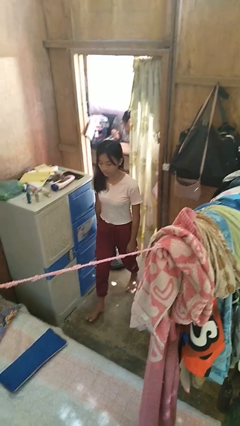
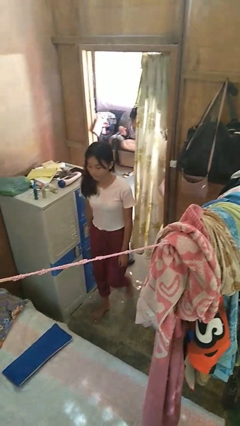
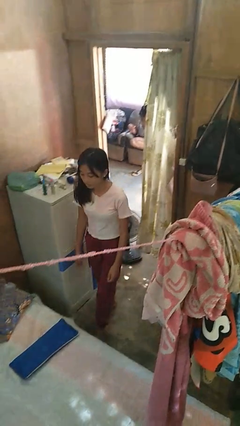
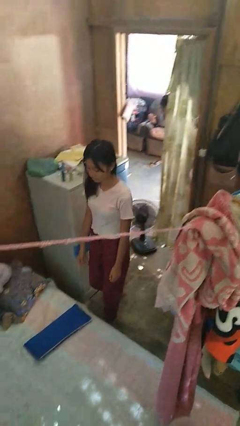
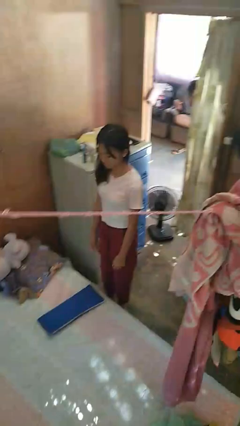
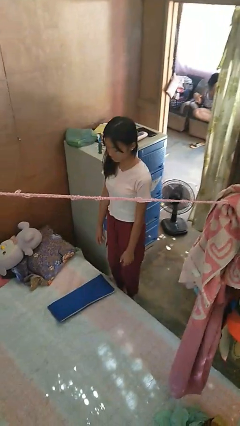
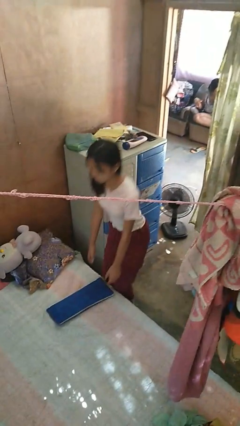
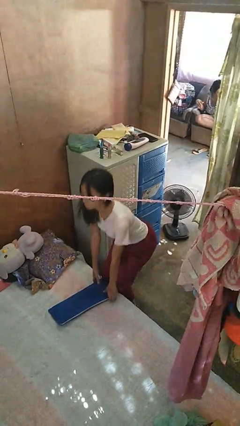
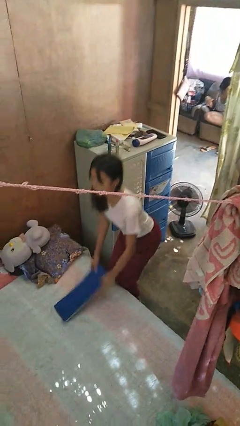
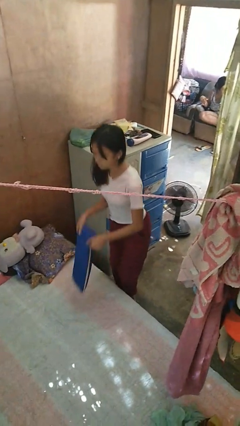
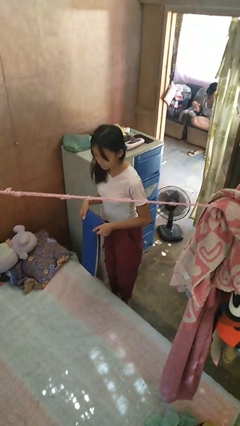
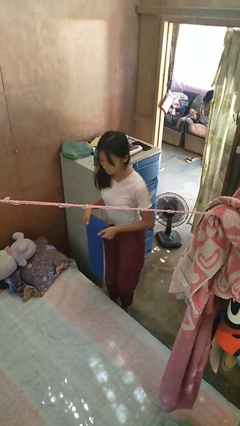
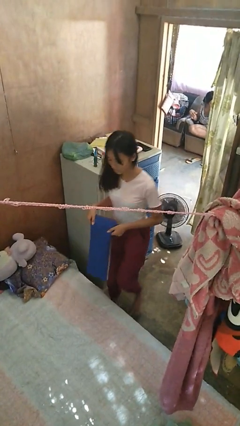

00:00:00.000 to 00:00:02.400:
person picks up object from bed

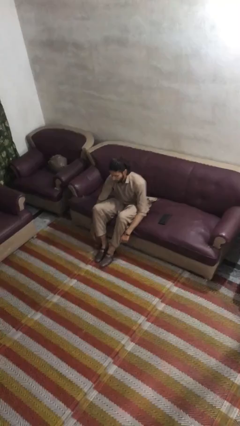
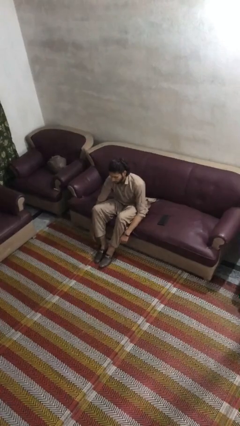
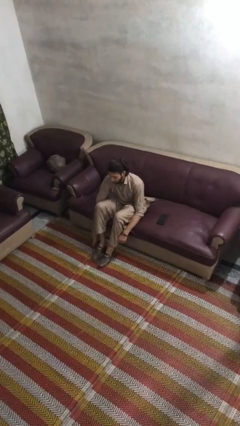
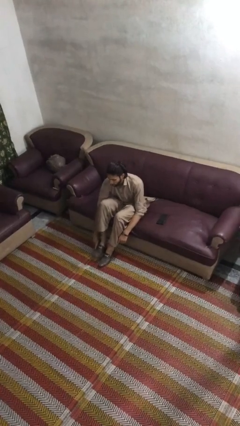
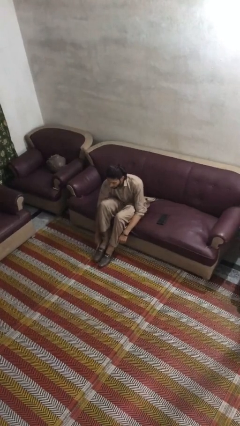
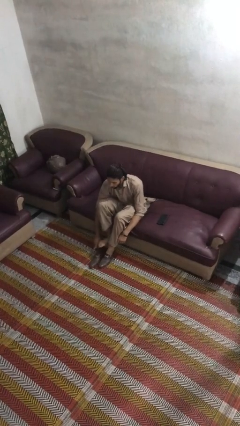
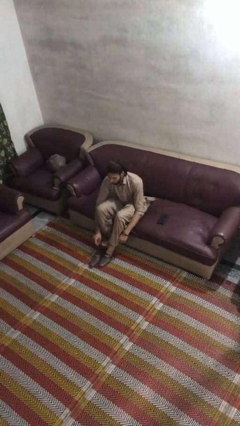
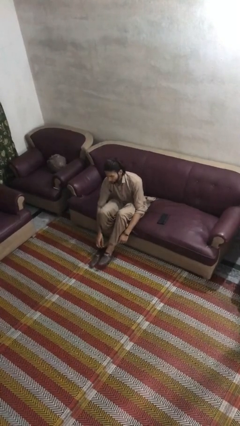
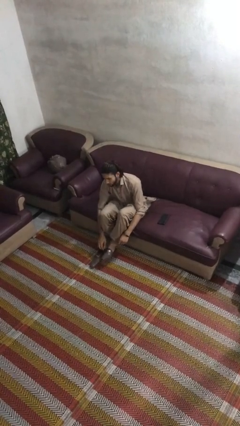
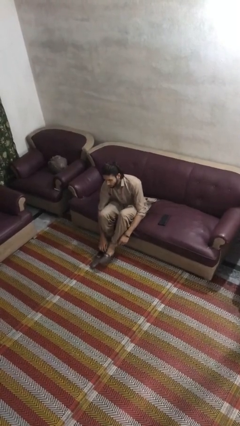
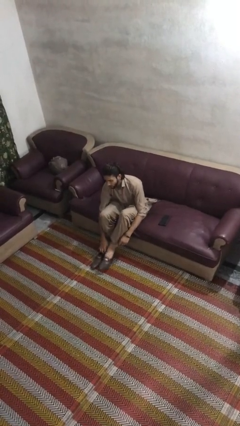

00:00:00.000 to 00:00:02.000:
person takes off shoes

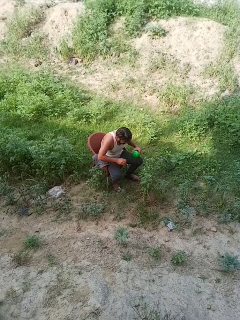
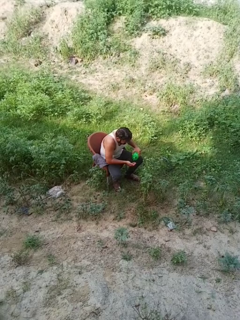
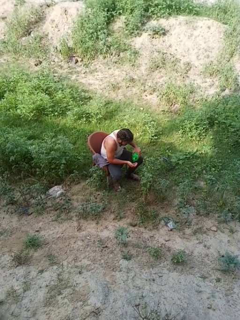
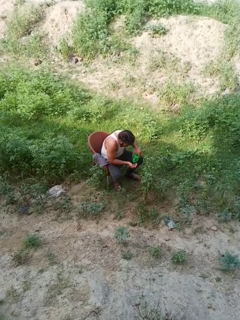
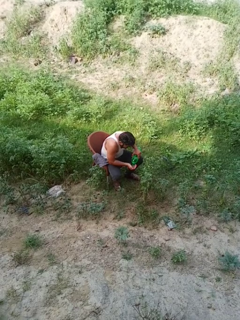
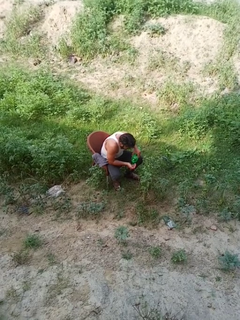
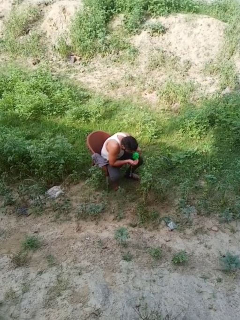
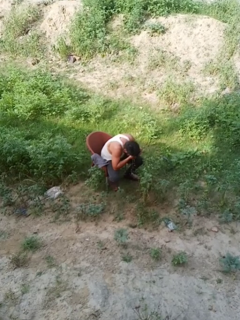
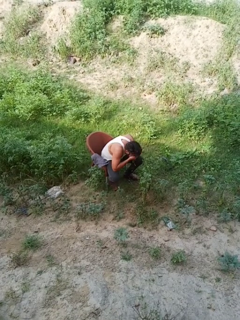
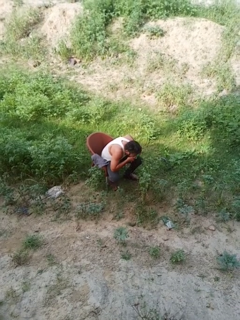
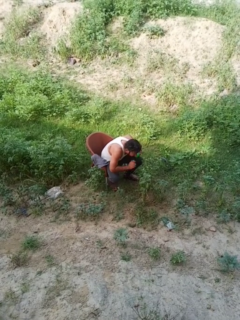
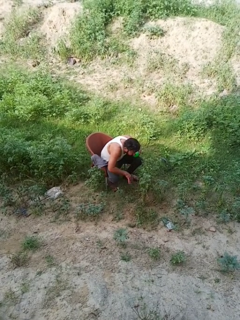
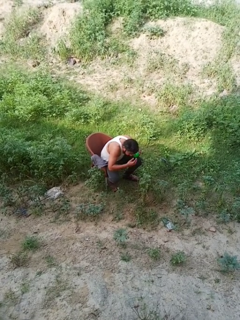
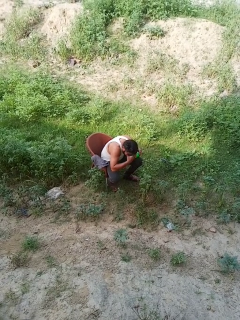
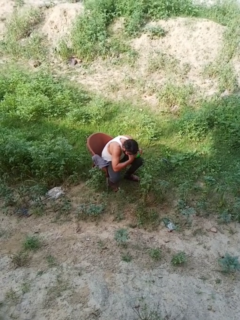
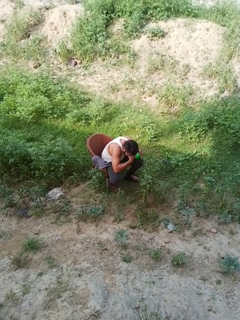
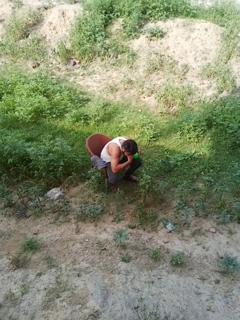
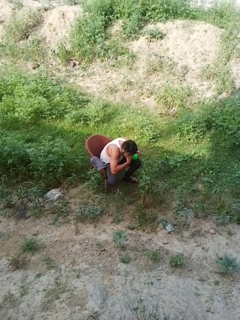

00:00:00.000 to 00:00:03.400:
person washes face

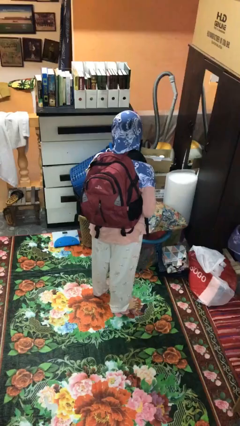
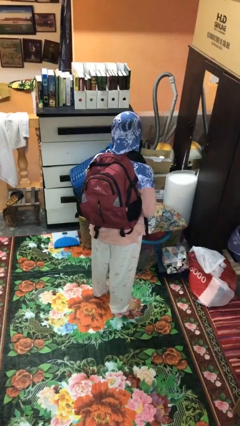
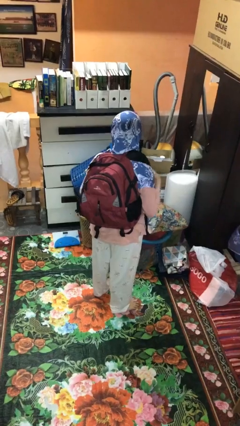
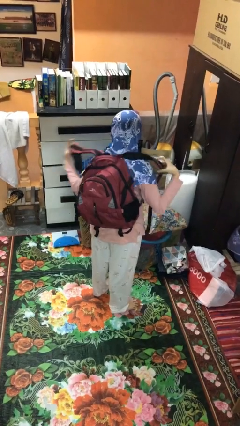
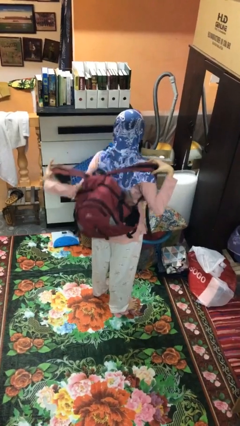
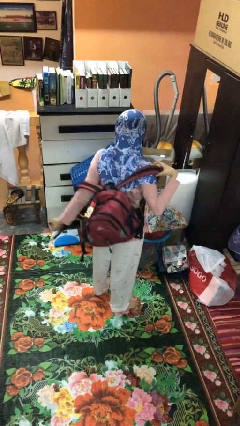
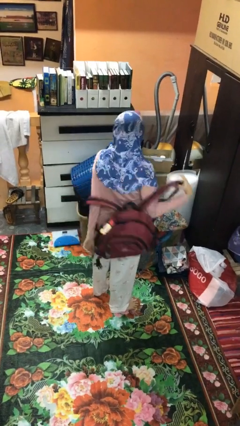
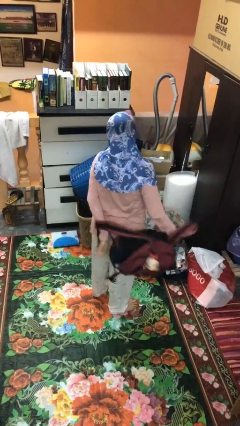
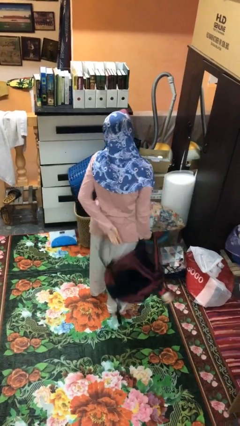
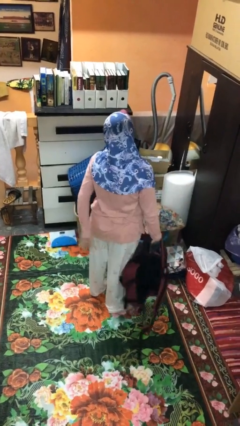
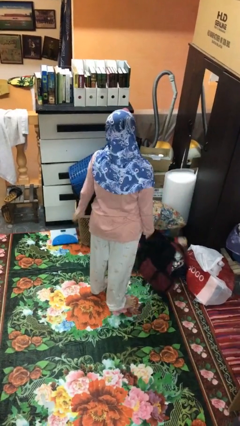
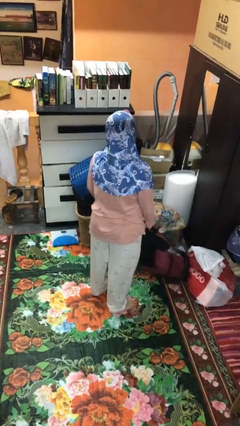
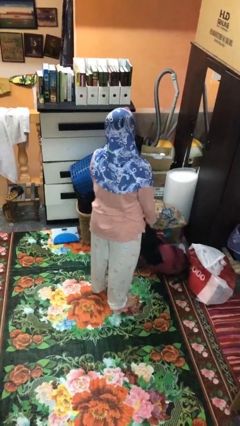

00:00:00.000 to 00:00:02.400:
person takes off backpack

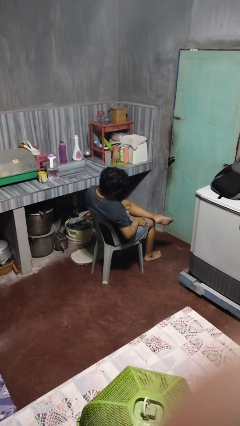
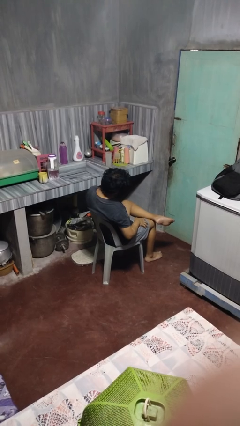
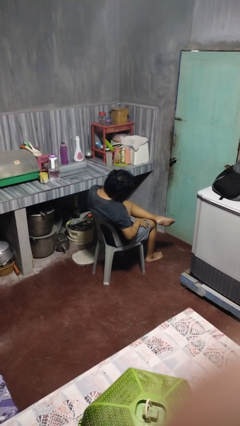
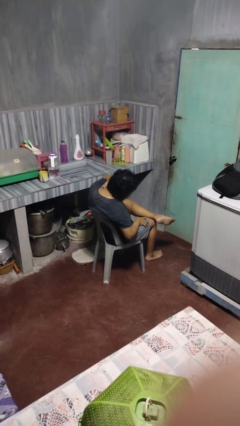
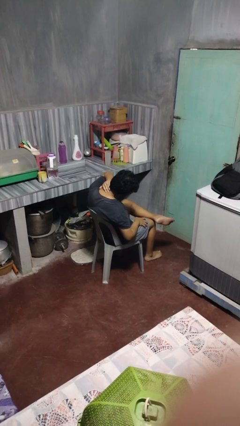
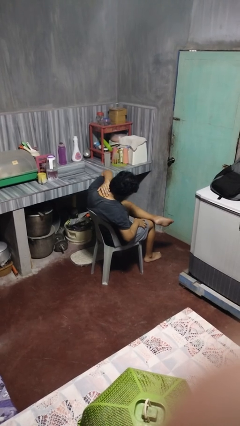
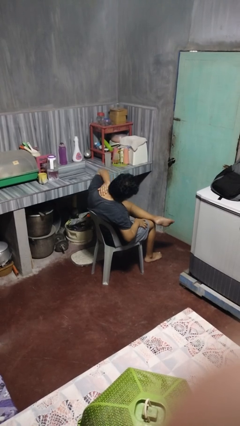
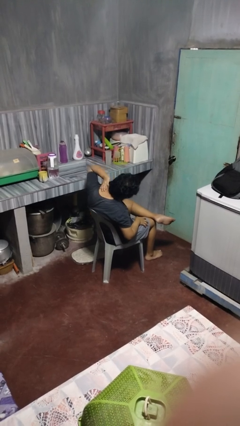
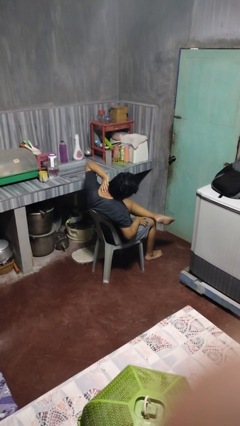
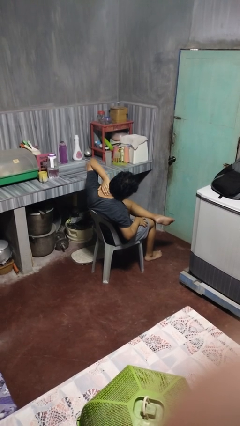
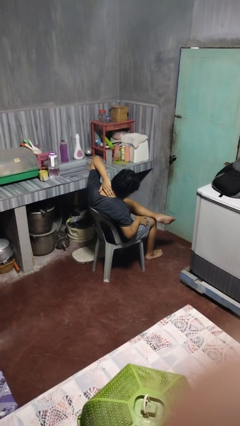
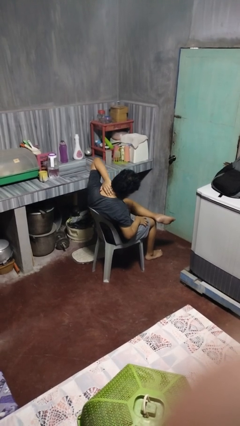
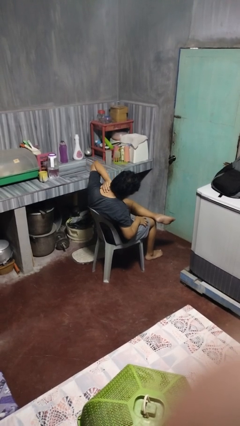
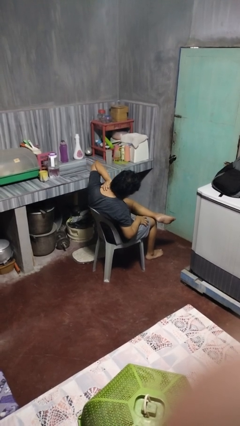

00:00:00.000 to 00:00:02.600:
person rubs neck

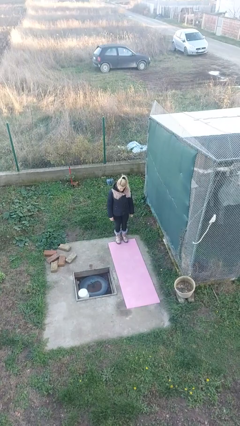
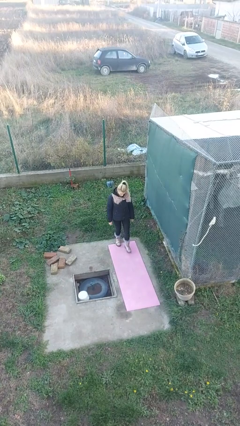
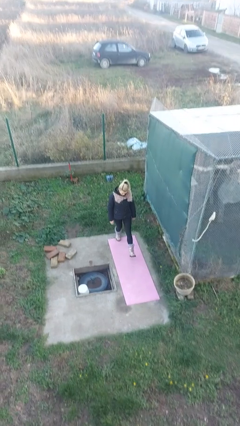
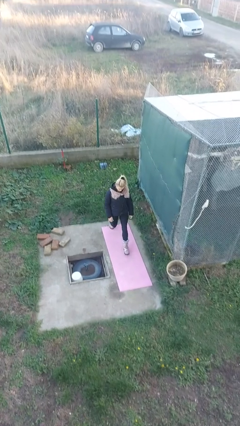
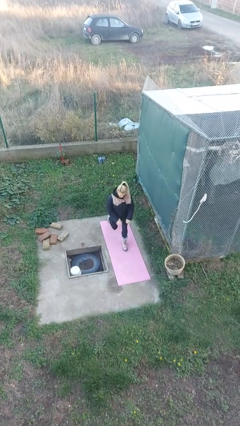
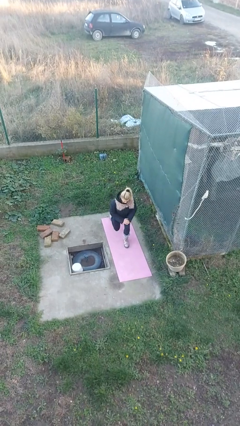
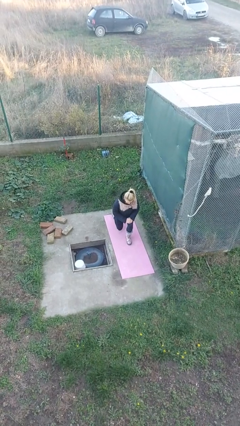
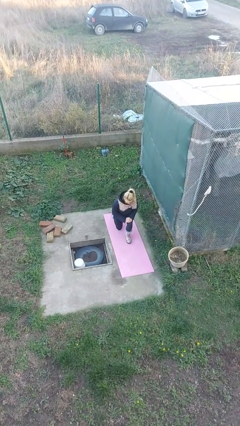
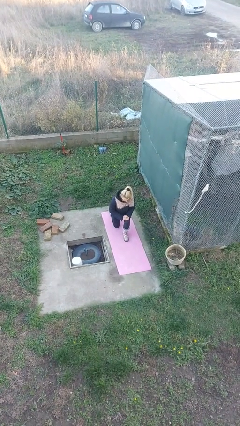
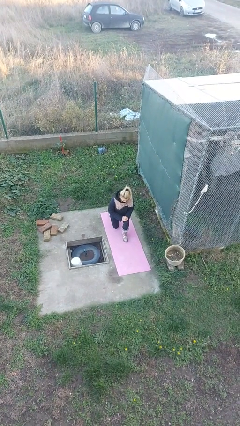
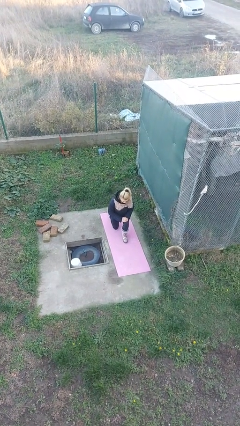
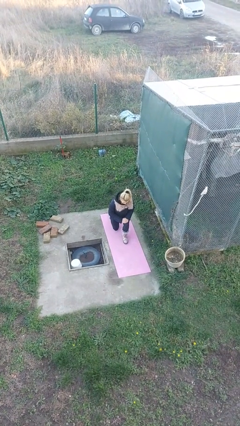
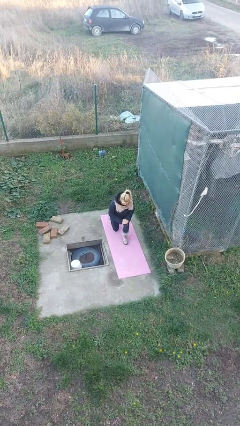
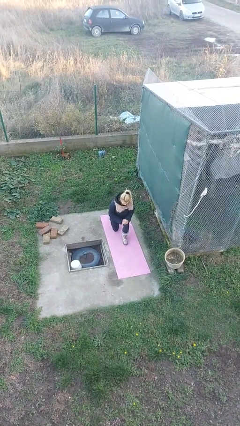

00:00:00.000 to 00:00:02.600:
person kneels

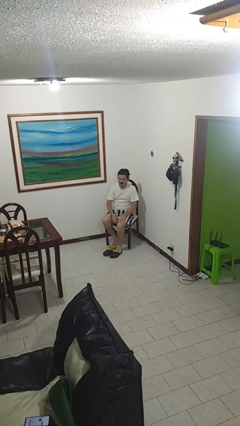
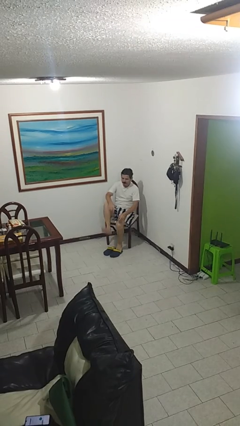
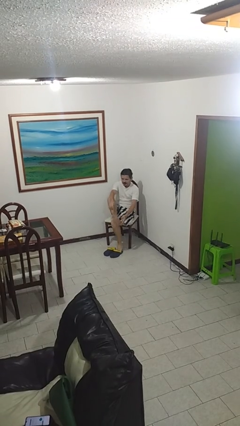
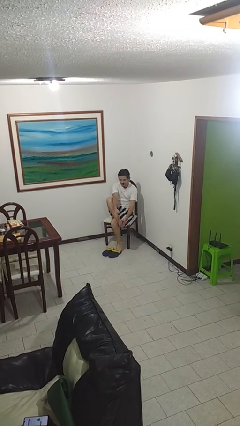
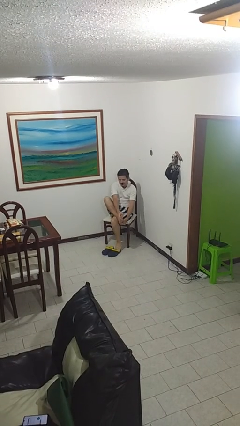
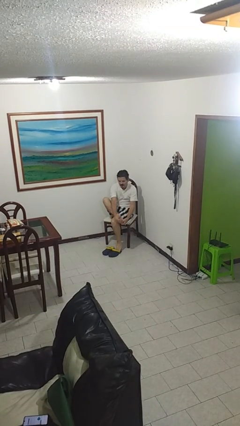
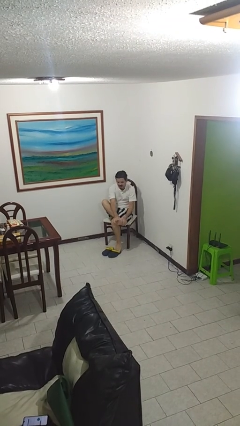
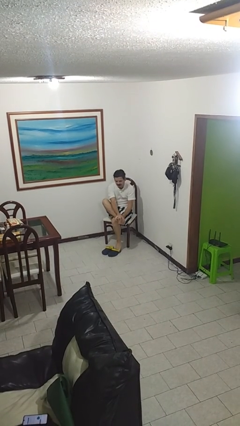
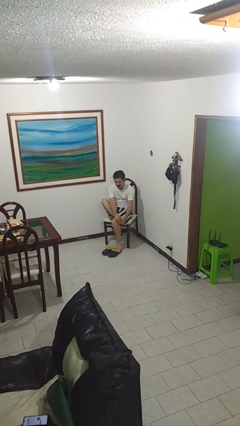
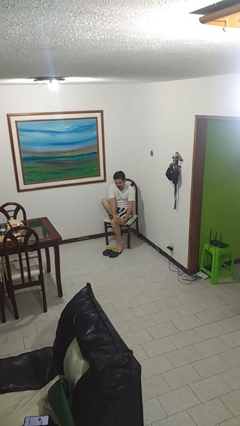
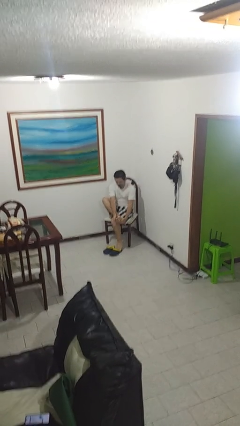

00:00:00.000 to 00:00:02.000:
person rubs foot

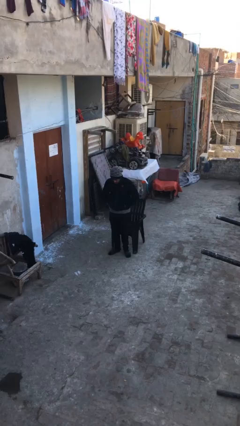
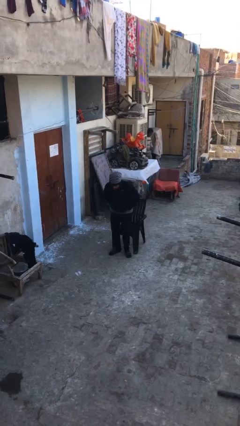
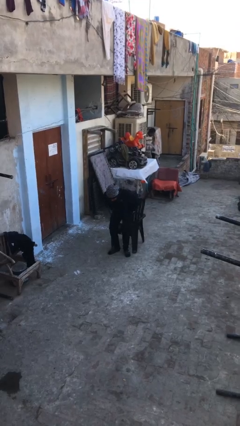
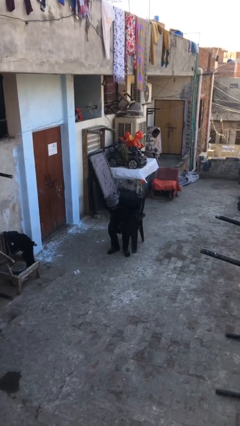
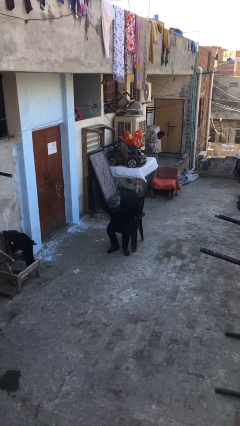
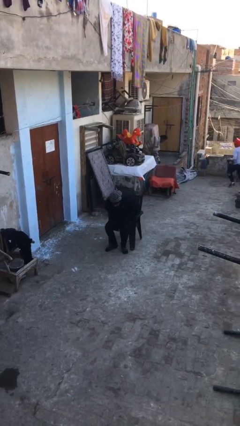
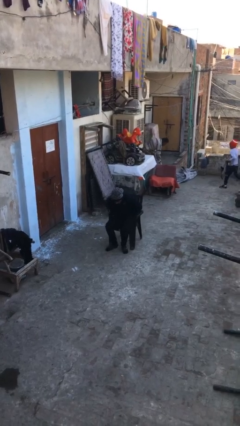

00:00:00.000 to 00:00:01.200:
person sits down
